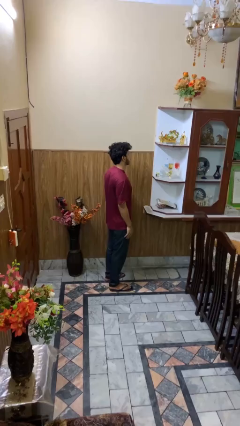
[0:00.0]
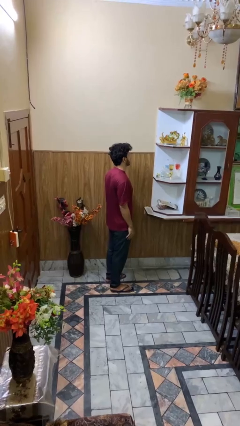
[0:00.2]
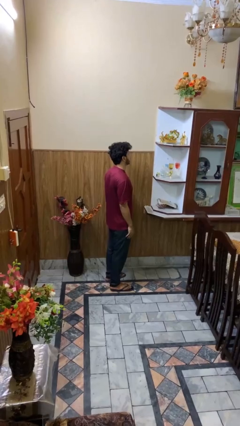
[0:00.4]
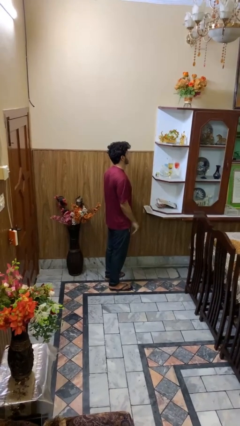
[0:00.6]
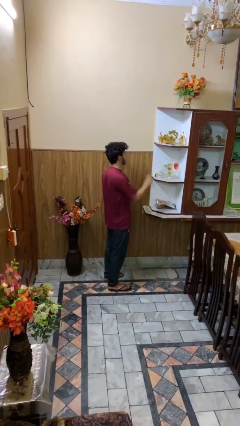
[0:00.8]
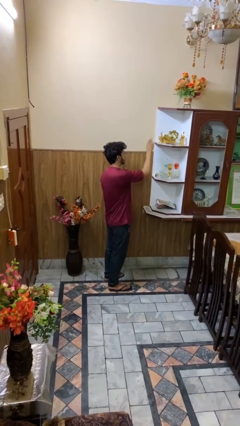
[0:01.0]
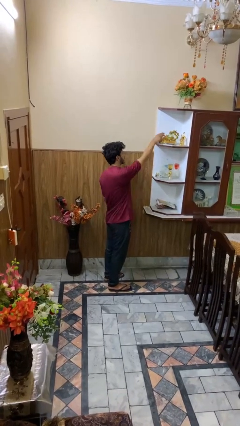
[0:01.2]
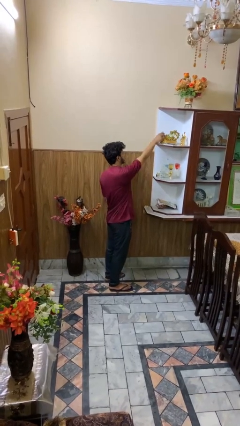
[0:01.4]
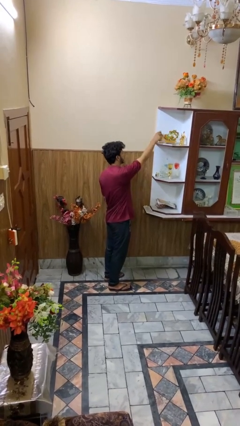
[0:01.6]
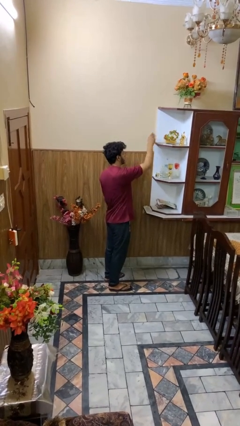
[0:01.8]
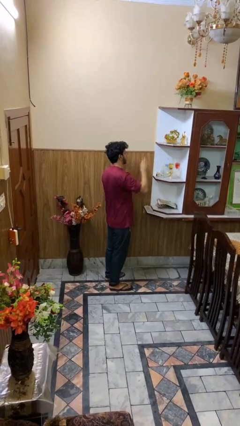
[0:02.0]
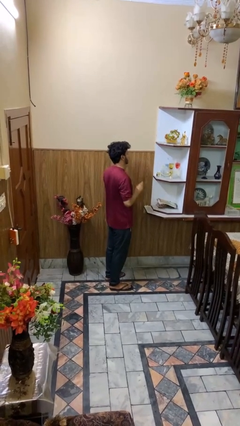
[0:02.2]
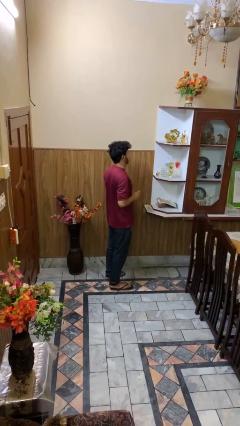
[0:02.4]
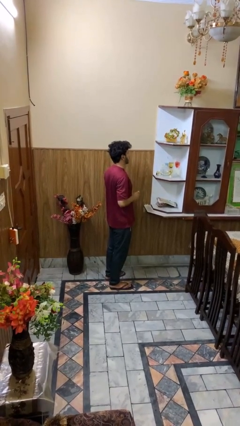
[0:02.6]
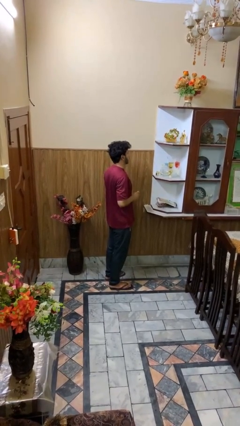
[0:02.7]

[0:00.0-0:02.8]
person picks up object from shelf

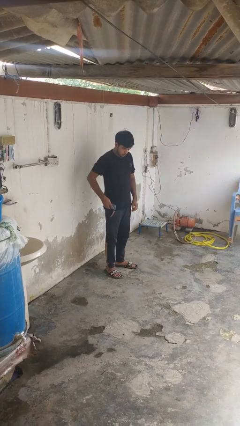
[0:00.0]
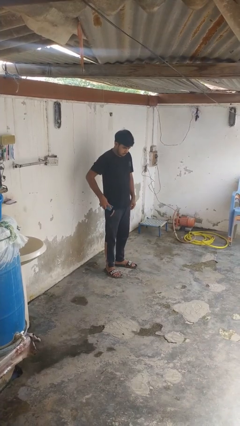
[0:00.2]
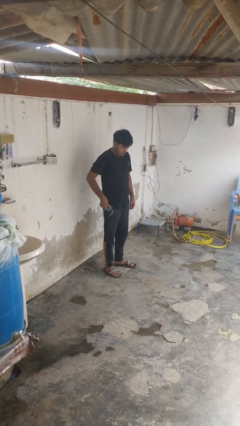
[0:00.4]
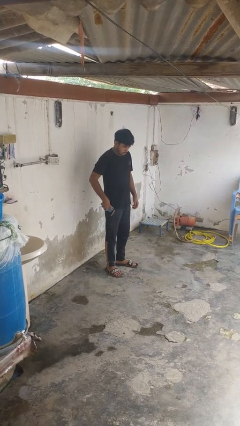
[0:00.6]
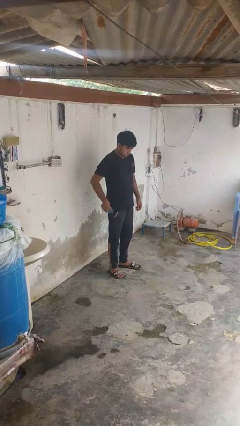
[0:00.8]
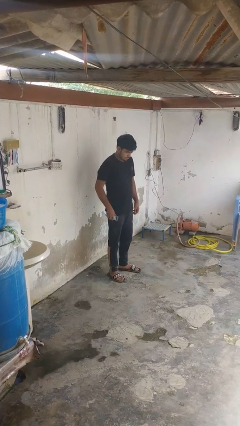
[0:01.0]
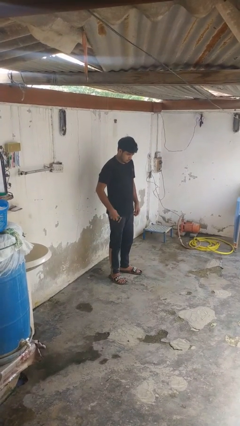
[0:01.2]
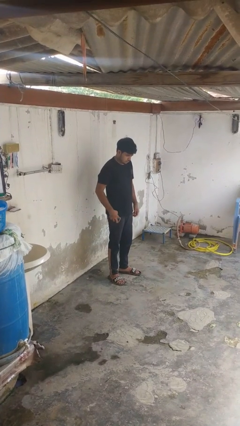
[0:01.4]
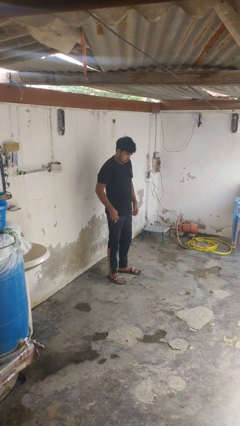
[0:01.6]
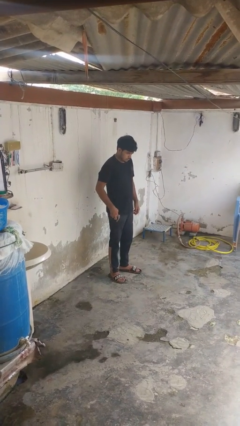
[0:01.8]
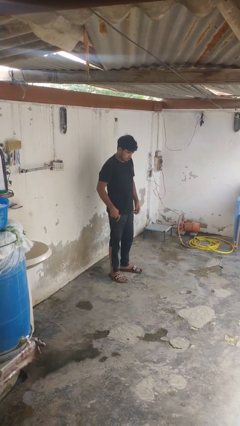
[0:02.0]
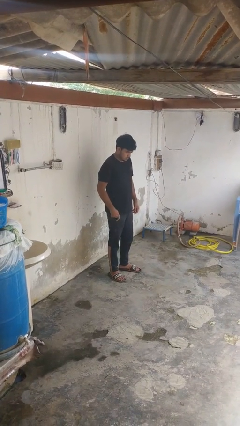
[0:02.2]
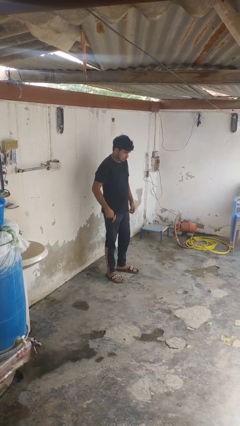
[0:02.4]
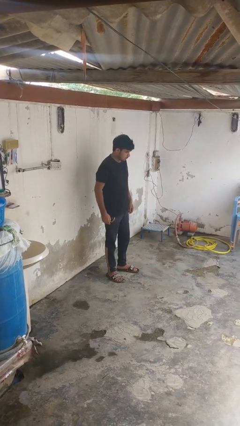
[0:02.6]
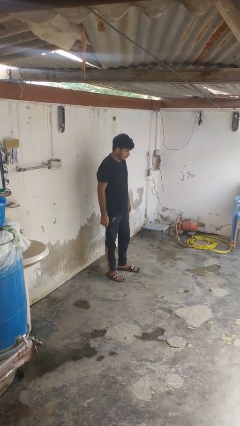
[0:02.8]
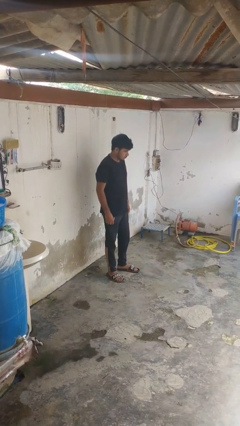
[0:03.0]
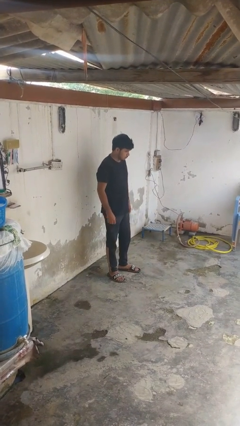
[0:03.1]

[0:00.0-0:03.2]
person puts phone into pocket

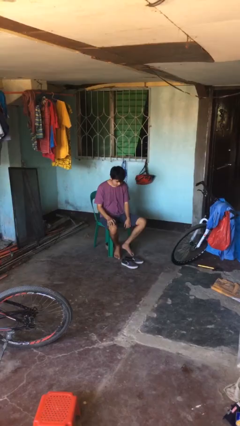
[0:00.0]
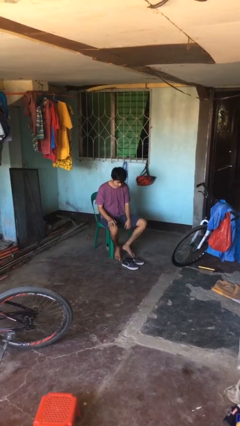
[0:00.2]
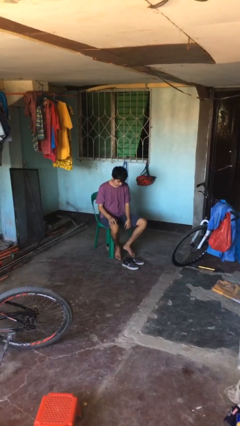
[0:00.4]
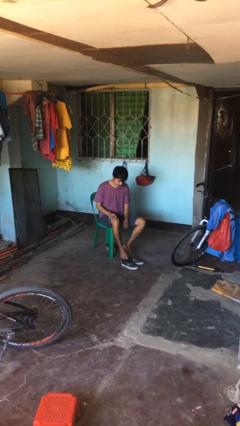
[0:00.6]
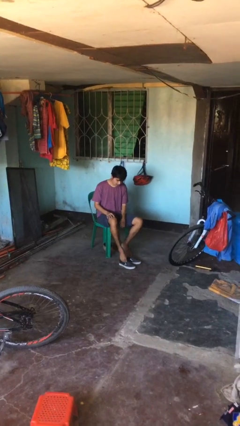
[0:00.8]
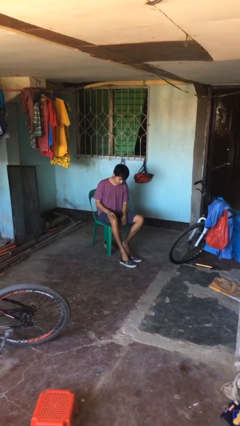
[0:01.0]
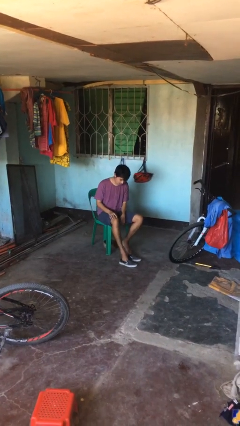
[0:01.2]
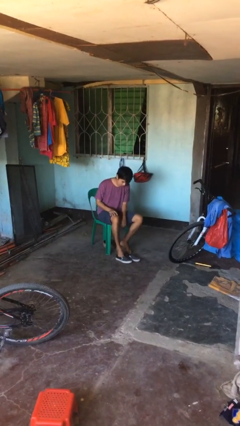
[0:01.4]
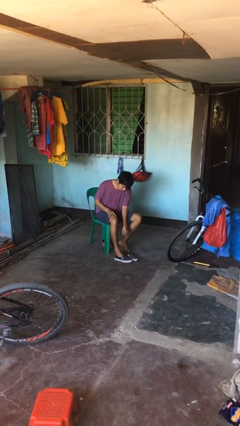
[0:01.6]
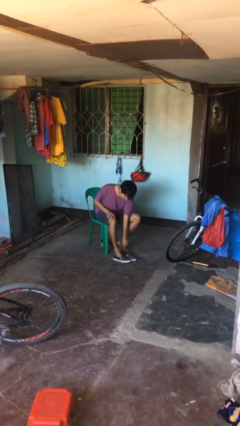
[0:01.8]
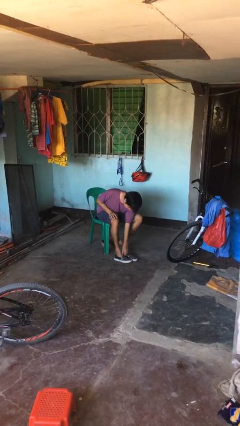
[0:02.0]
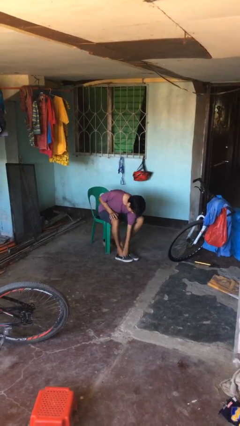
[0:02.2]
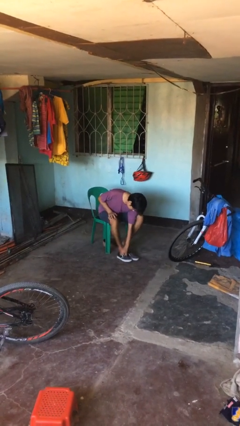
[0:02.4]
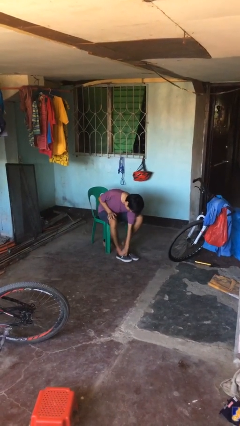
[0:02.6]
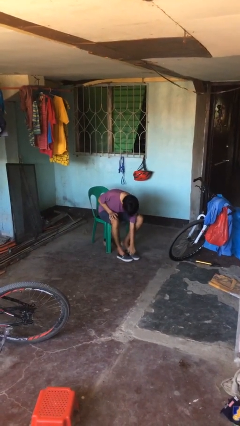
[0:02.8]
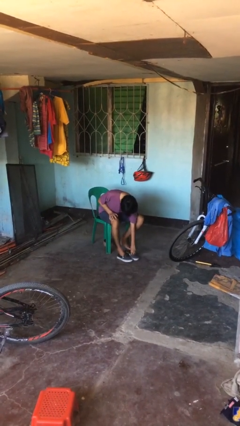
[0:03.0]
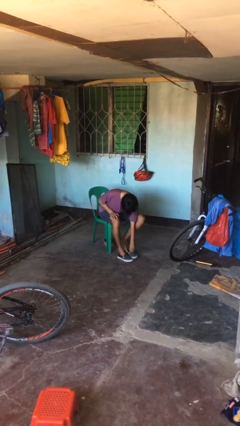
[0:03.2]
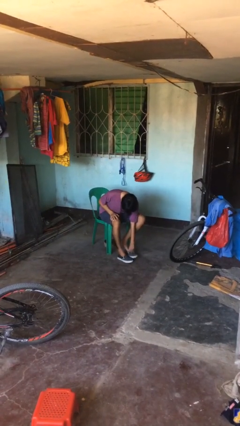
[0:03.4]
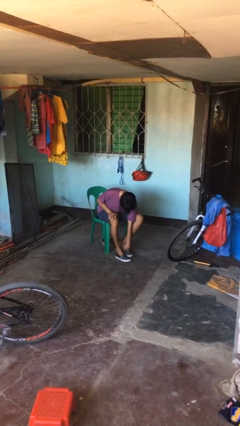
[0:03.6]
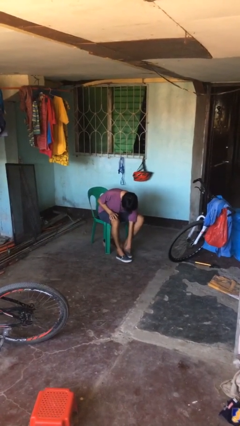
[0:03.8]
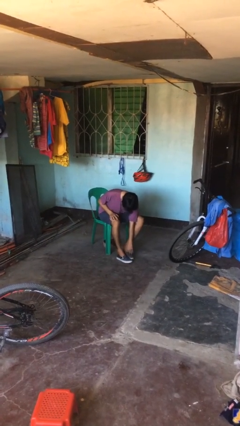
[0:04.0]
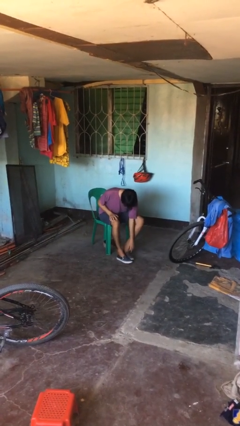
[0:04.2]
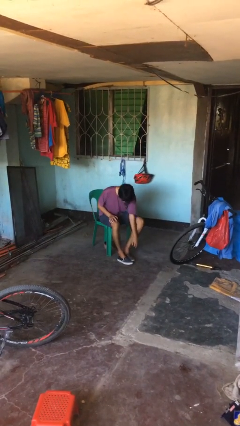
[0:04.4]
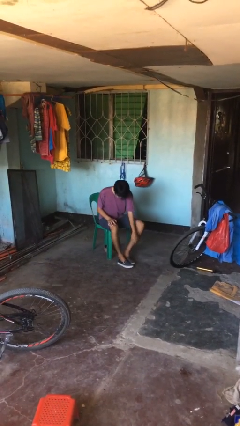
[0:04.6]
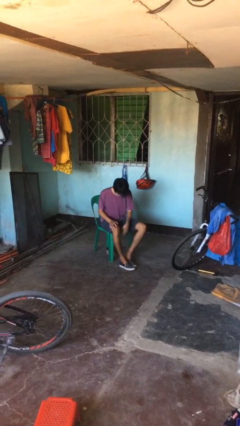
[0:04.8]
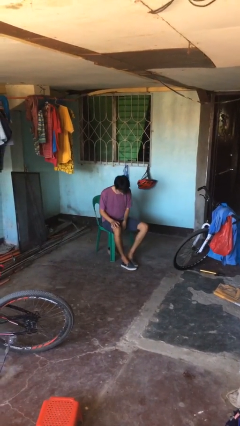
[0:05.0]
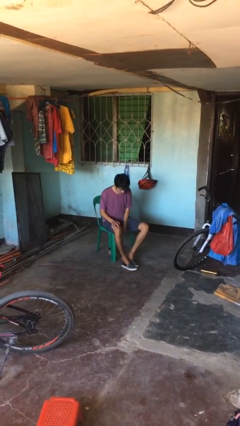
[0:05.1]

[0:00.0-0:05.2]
person puts on shoes

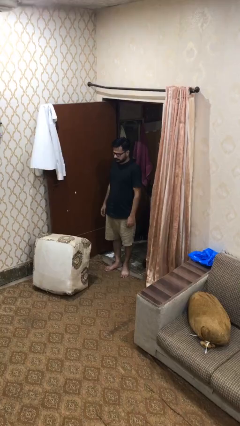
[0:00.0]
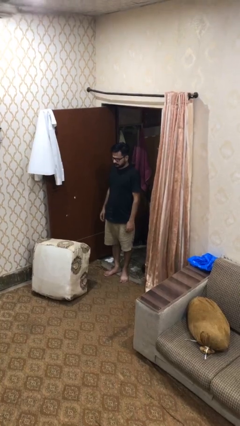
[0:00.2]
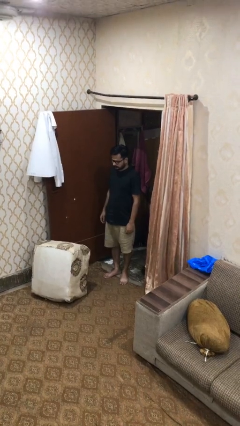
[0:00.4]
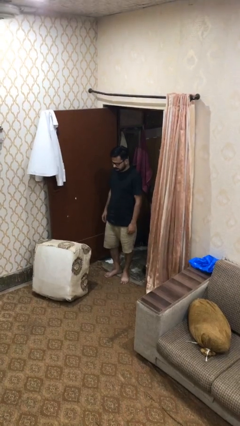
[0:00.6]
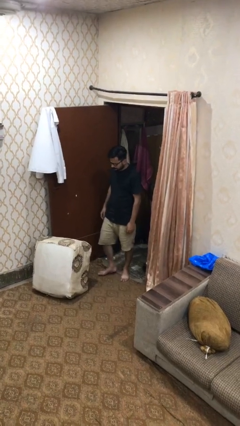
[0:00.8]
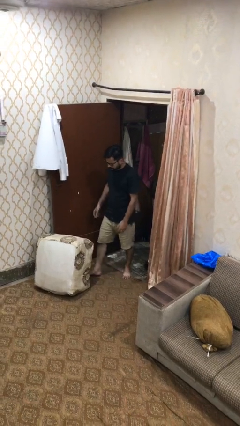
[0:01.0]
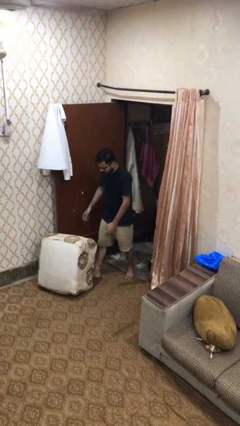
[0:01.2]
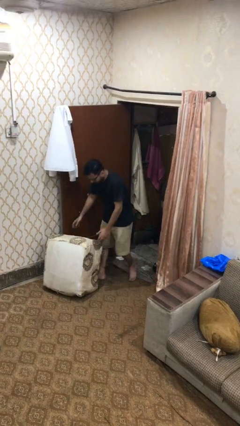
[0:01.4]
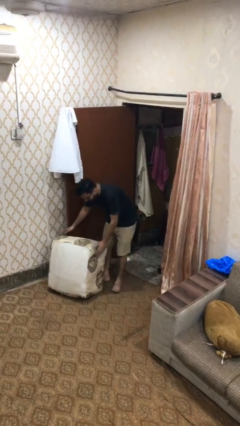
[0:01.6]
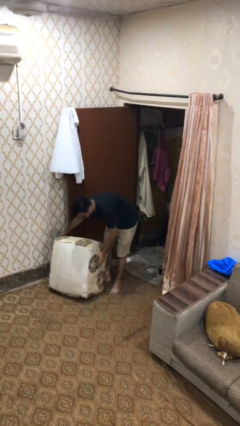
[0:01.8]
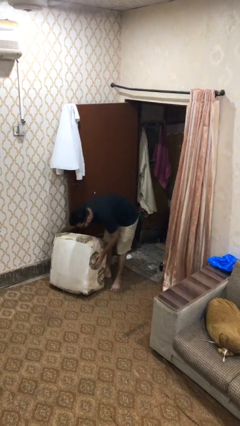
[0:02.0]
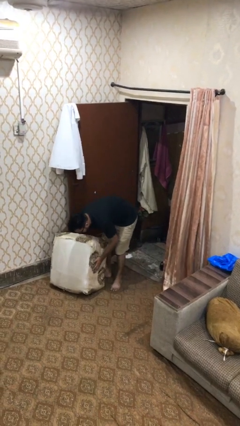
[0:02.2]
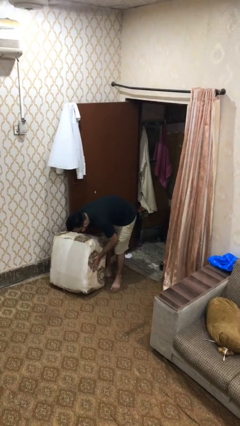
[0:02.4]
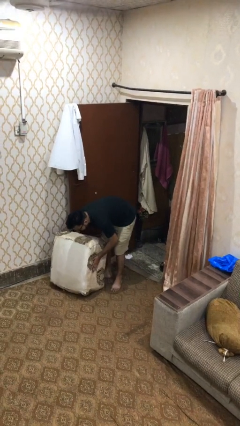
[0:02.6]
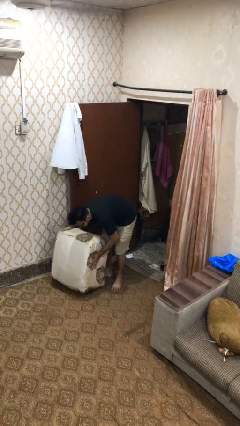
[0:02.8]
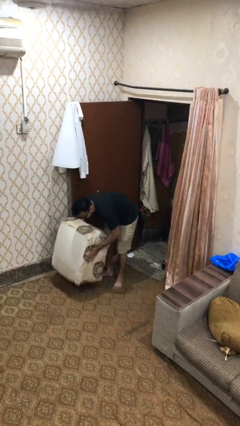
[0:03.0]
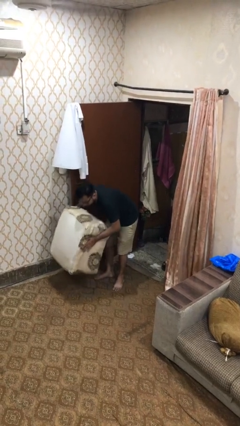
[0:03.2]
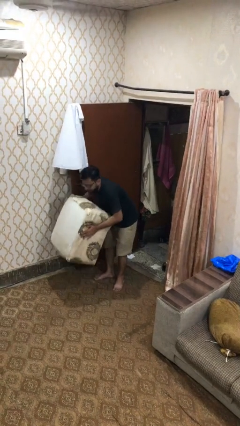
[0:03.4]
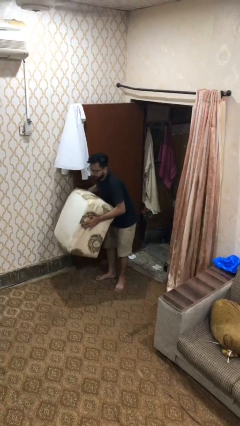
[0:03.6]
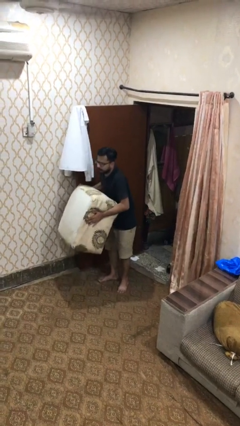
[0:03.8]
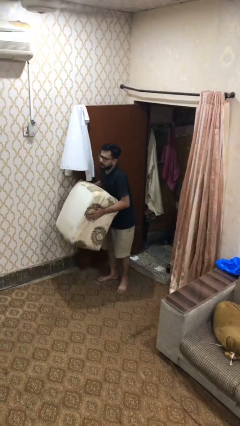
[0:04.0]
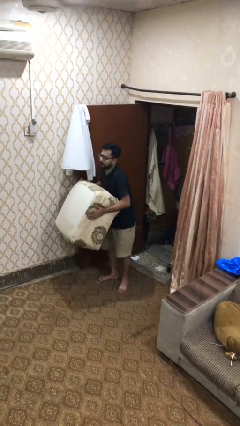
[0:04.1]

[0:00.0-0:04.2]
person picks up object from floor

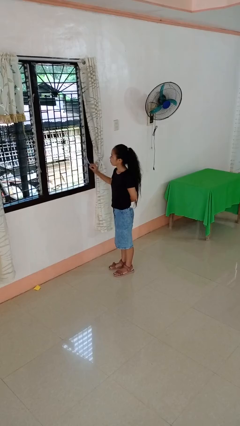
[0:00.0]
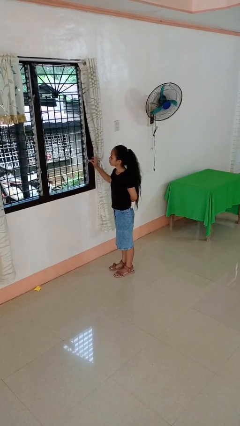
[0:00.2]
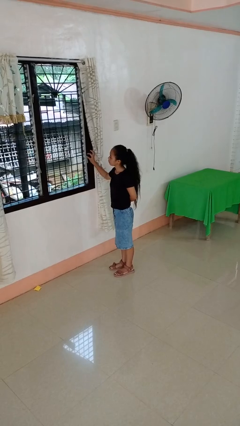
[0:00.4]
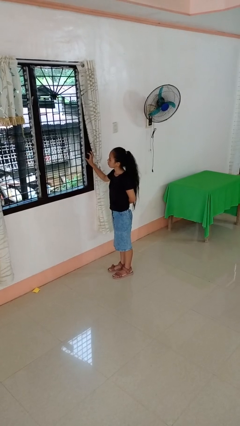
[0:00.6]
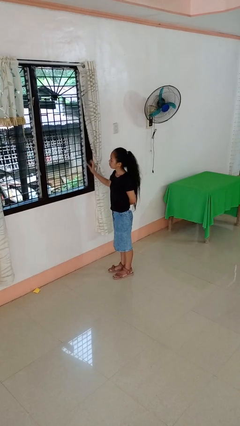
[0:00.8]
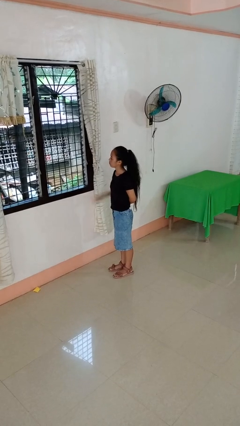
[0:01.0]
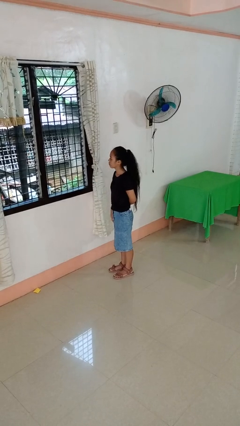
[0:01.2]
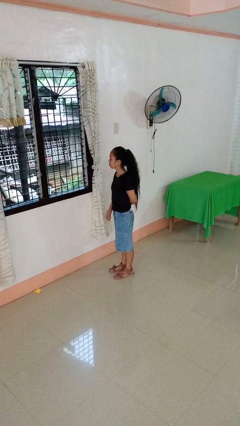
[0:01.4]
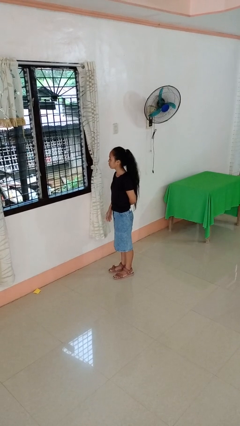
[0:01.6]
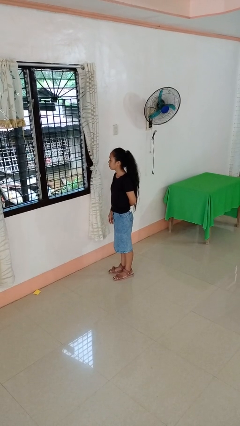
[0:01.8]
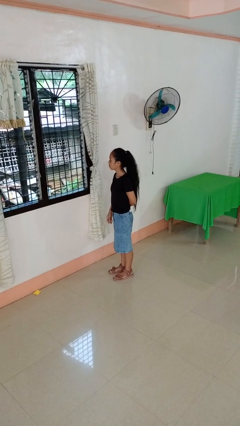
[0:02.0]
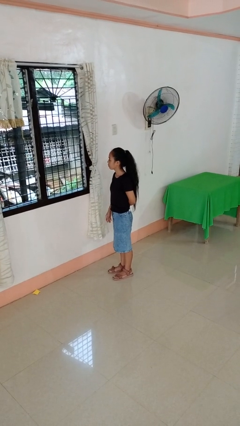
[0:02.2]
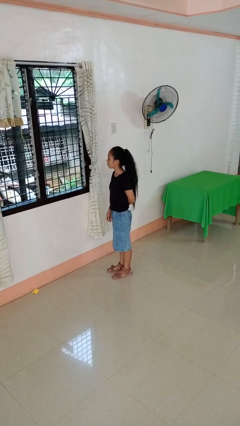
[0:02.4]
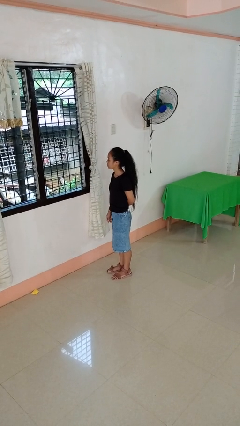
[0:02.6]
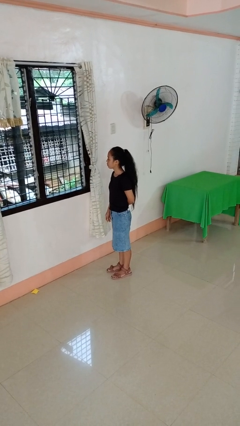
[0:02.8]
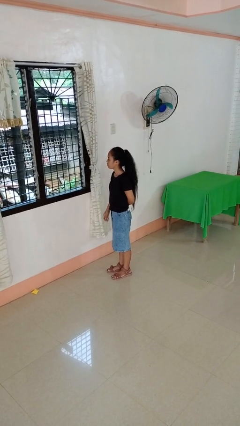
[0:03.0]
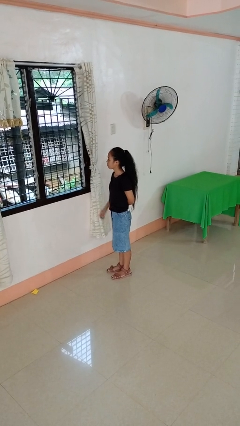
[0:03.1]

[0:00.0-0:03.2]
person closes home window
